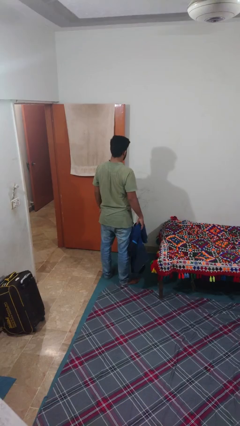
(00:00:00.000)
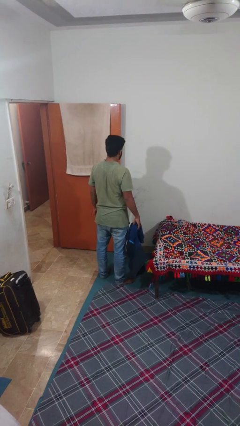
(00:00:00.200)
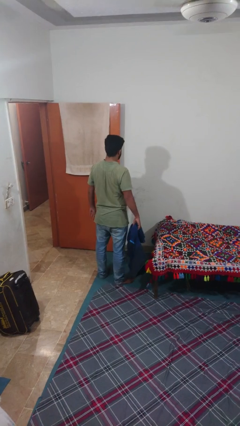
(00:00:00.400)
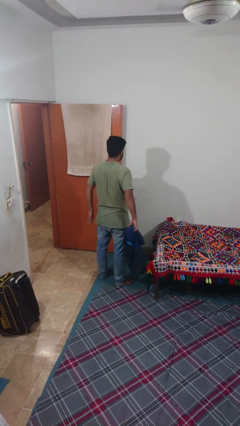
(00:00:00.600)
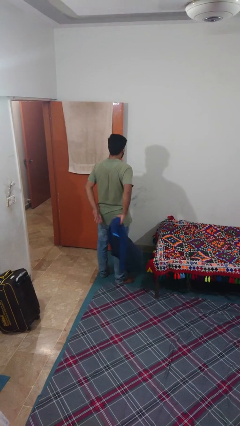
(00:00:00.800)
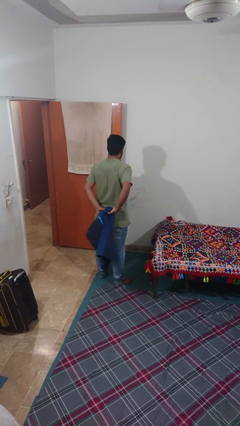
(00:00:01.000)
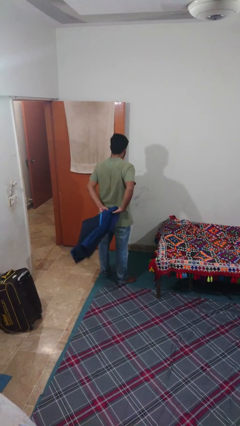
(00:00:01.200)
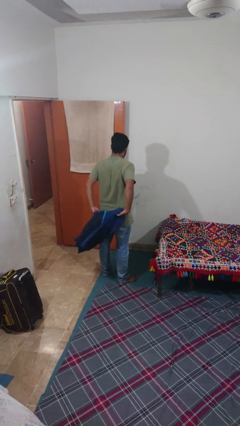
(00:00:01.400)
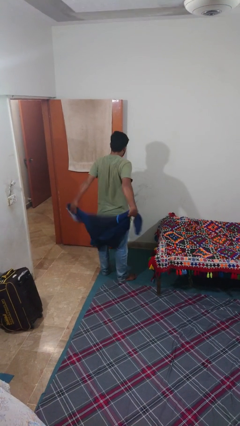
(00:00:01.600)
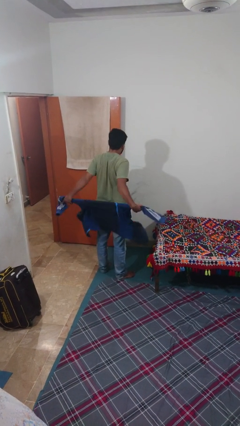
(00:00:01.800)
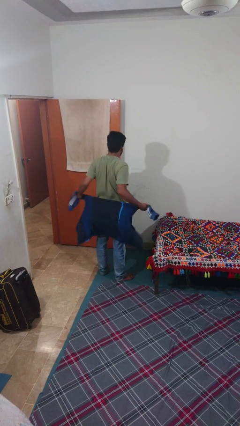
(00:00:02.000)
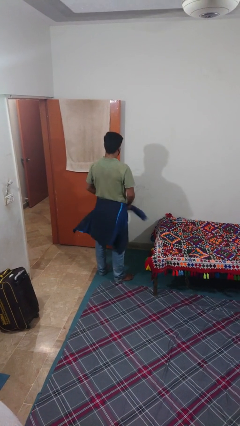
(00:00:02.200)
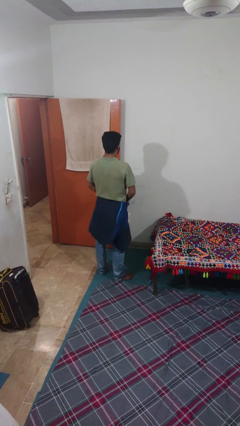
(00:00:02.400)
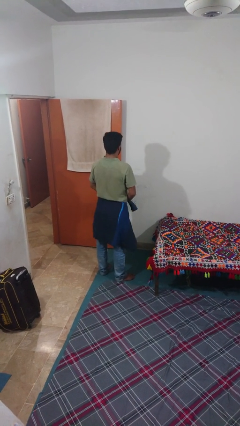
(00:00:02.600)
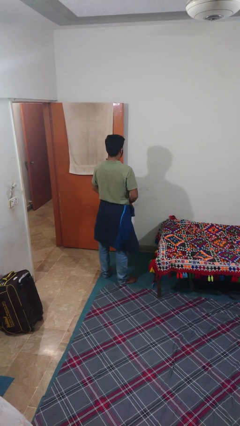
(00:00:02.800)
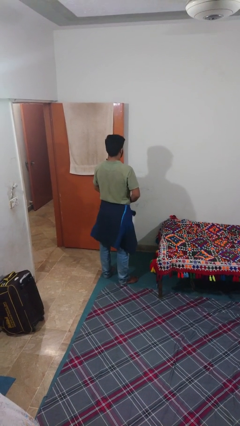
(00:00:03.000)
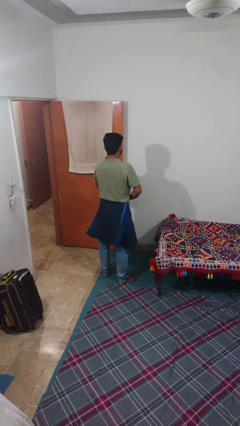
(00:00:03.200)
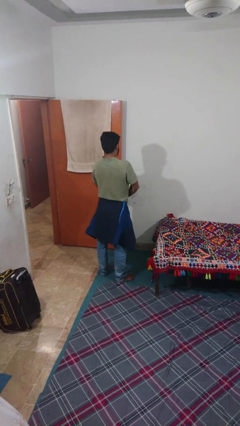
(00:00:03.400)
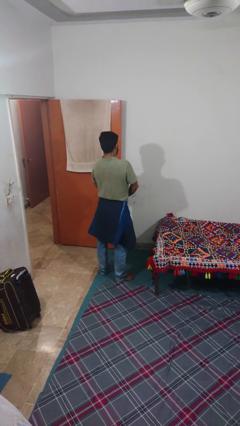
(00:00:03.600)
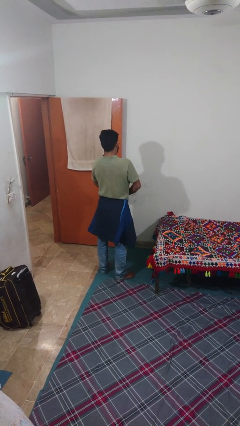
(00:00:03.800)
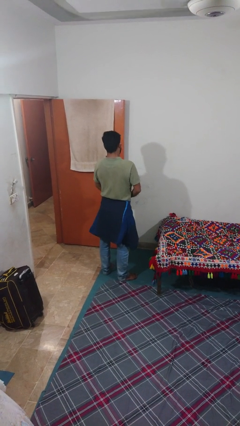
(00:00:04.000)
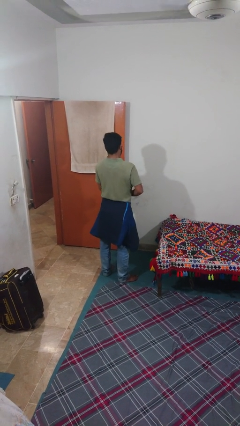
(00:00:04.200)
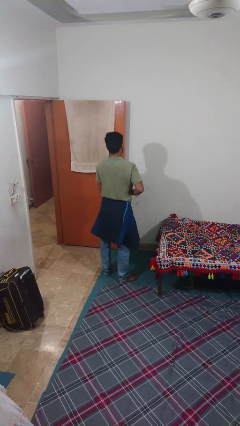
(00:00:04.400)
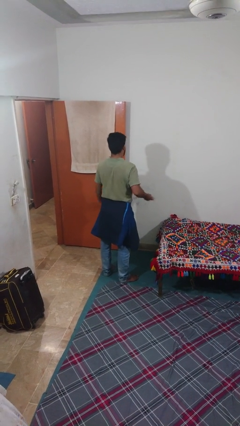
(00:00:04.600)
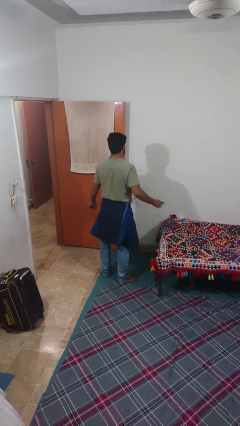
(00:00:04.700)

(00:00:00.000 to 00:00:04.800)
person ties jacket around waist

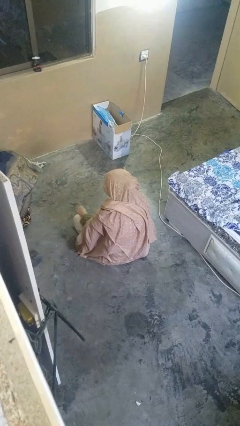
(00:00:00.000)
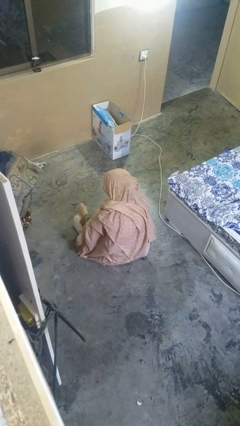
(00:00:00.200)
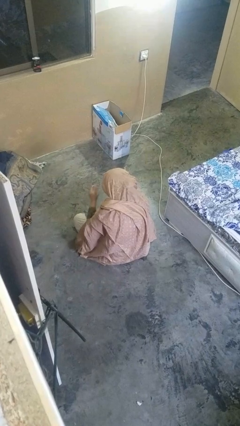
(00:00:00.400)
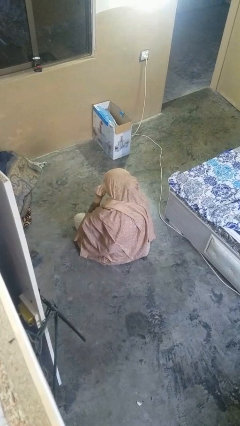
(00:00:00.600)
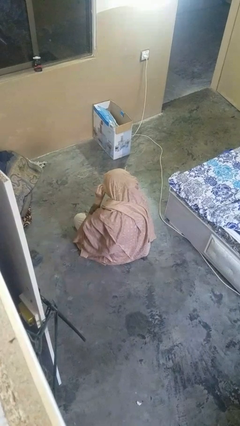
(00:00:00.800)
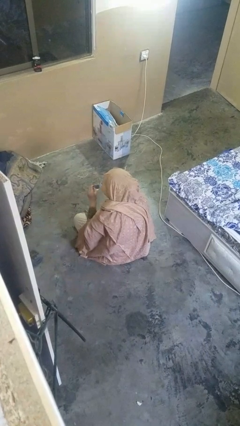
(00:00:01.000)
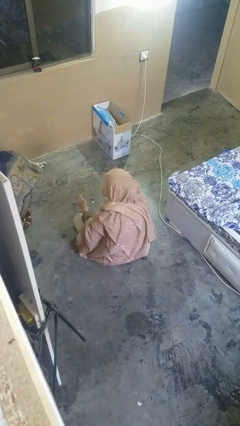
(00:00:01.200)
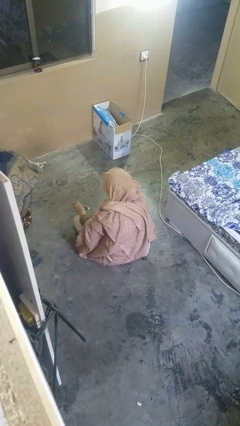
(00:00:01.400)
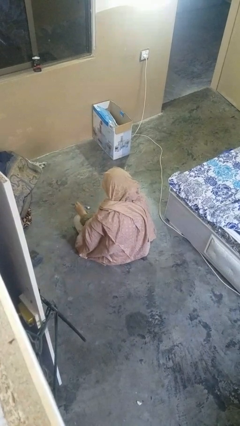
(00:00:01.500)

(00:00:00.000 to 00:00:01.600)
person takes off glasses

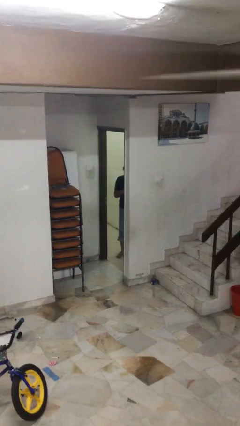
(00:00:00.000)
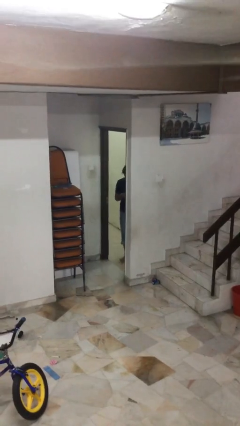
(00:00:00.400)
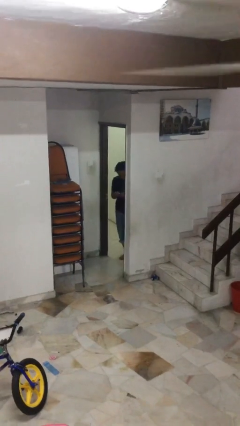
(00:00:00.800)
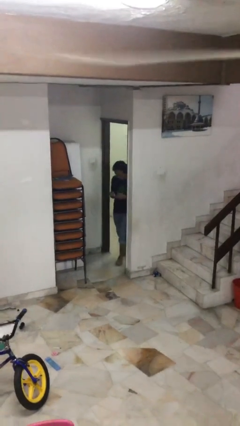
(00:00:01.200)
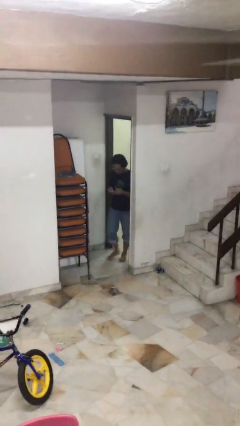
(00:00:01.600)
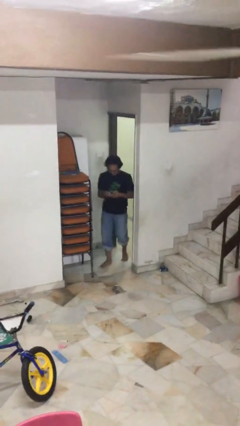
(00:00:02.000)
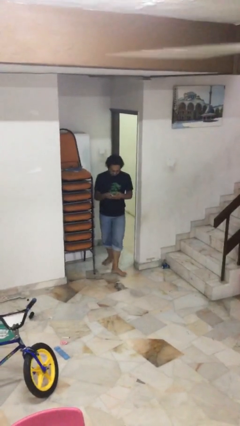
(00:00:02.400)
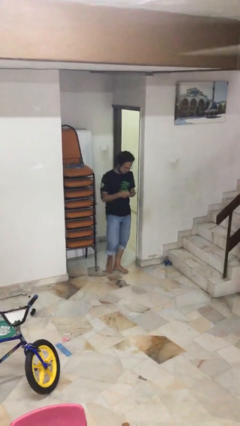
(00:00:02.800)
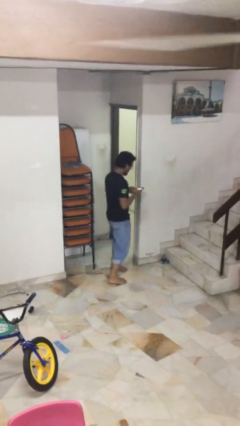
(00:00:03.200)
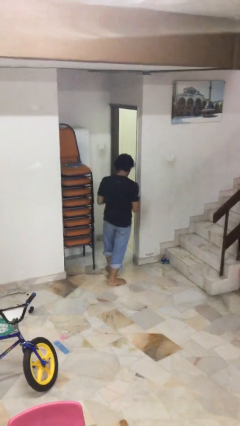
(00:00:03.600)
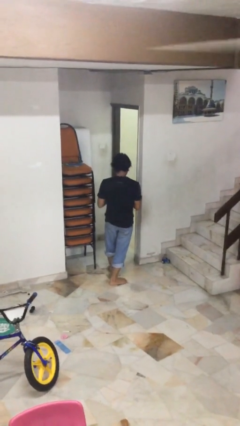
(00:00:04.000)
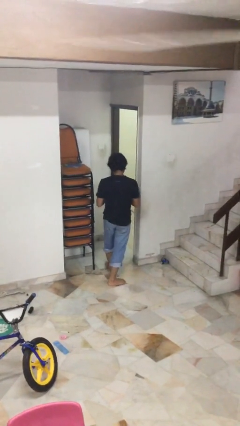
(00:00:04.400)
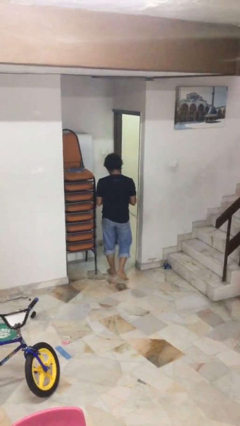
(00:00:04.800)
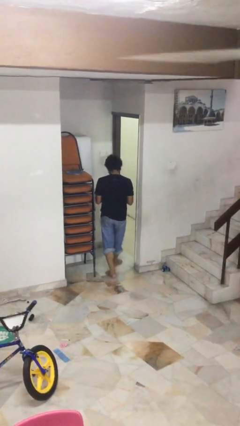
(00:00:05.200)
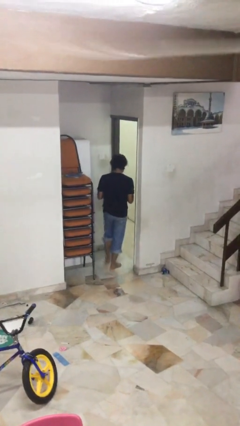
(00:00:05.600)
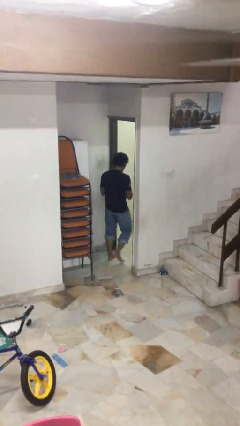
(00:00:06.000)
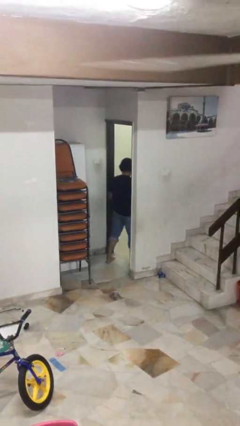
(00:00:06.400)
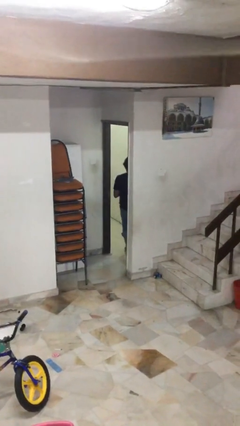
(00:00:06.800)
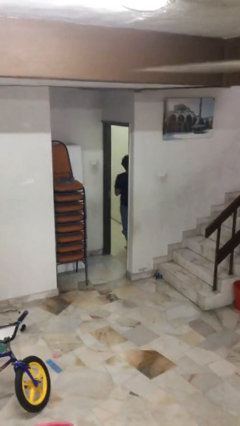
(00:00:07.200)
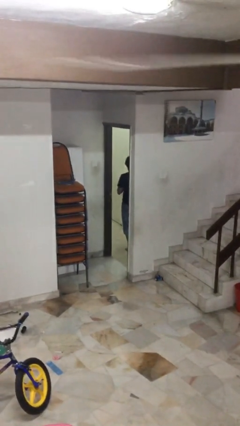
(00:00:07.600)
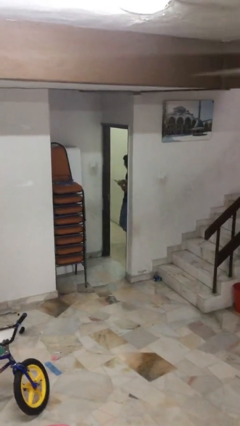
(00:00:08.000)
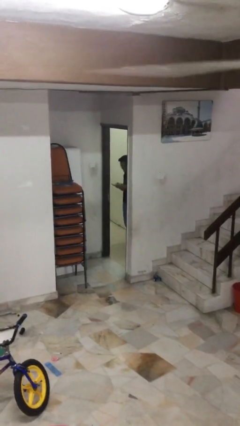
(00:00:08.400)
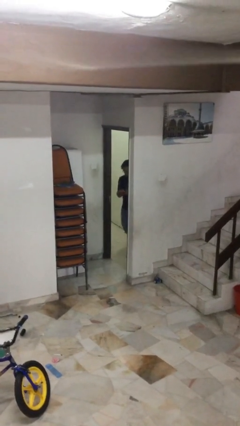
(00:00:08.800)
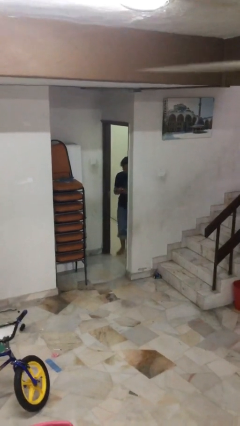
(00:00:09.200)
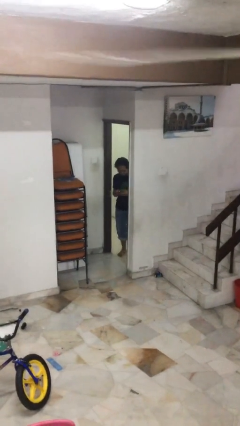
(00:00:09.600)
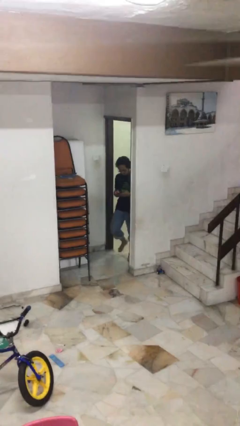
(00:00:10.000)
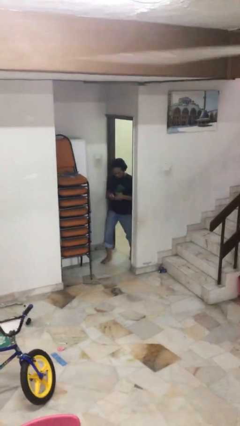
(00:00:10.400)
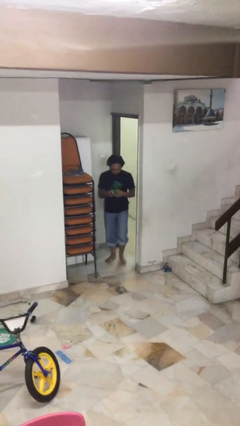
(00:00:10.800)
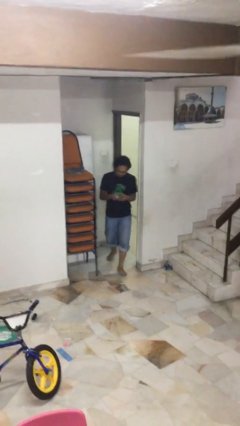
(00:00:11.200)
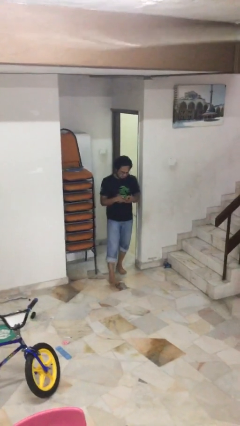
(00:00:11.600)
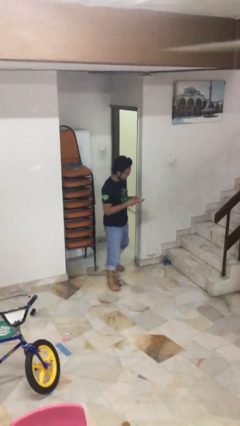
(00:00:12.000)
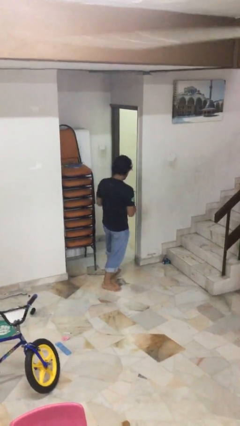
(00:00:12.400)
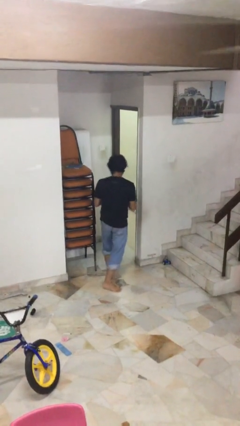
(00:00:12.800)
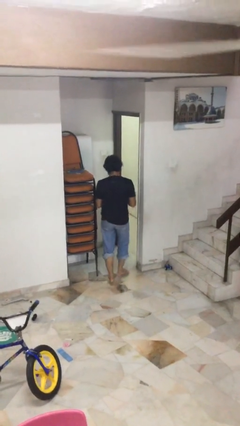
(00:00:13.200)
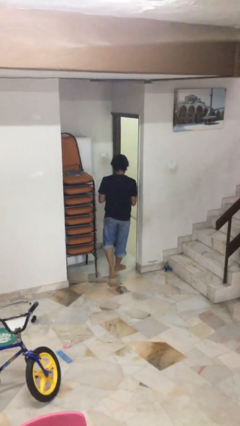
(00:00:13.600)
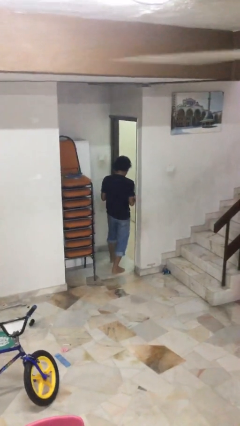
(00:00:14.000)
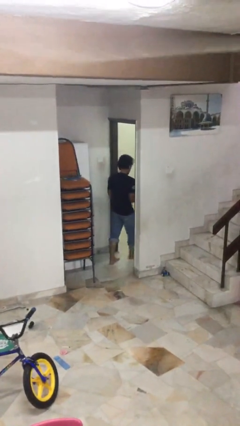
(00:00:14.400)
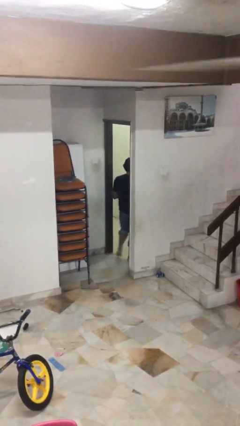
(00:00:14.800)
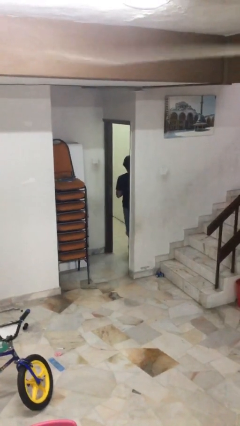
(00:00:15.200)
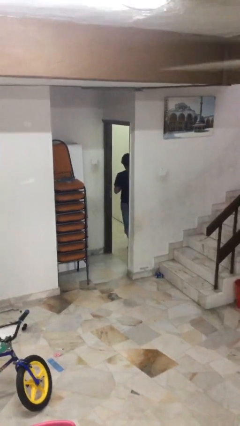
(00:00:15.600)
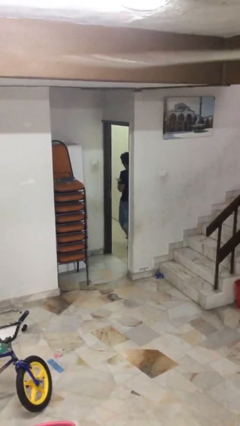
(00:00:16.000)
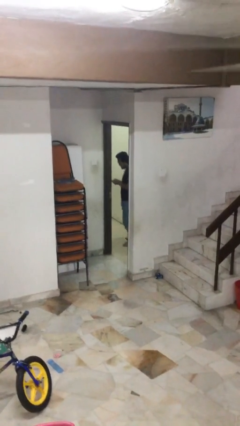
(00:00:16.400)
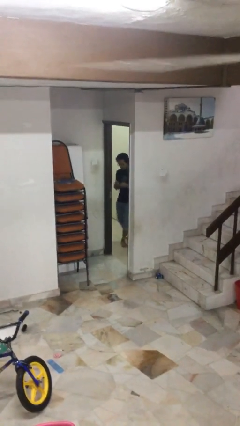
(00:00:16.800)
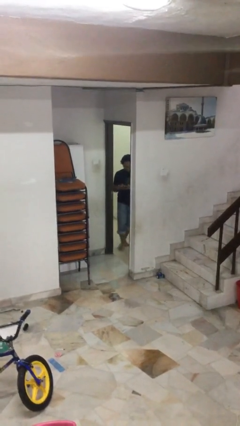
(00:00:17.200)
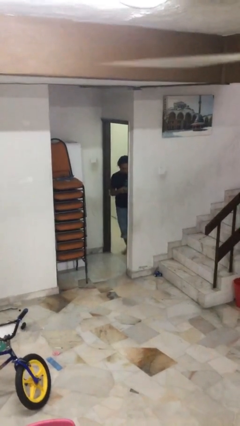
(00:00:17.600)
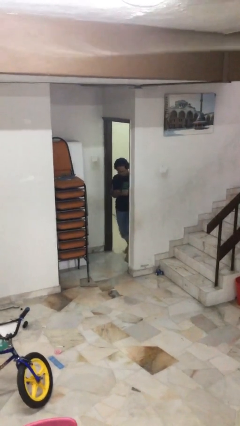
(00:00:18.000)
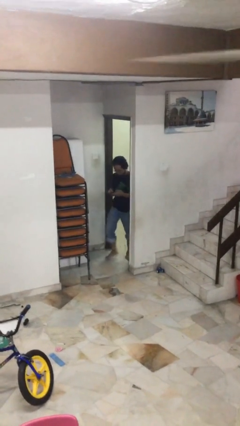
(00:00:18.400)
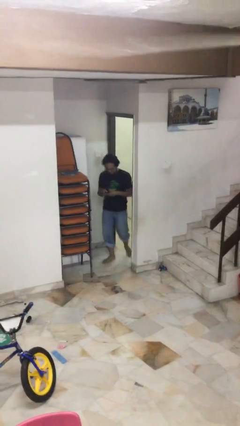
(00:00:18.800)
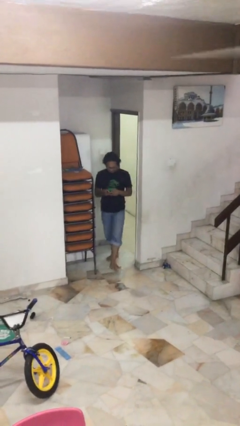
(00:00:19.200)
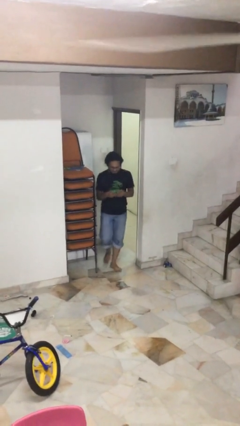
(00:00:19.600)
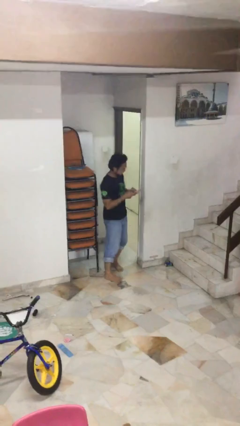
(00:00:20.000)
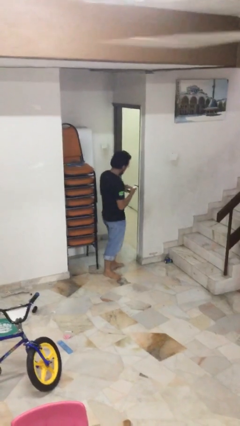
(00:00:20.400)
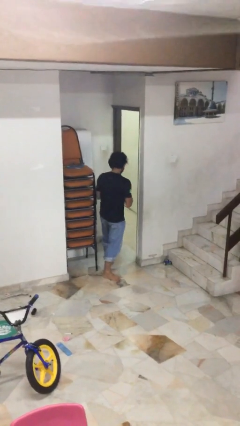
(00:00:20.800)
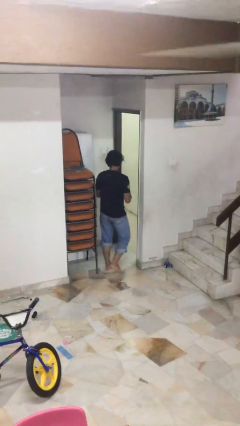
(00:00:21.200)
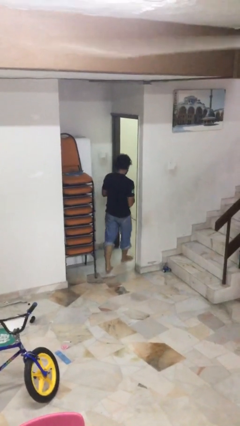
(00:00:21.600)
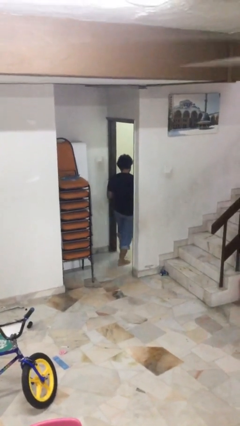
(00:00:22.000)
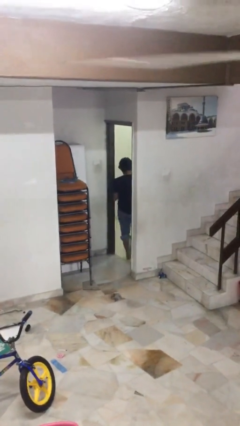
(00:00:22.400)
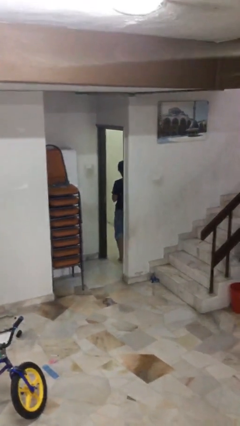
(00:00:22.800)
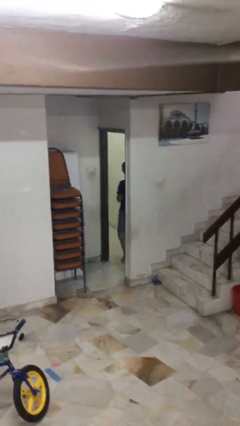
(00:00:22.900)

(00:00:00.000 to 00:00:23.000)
person texts on phone
